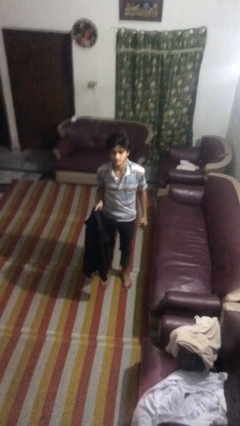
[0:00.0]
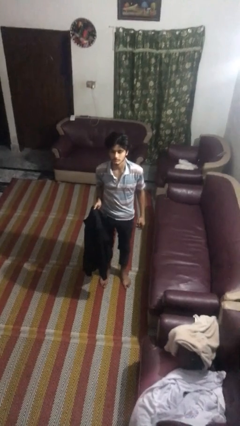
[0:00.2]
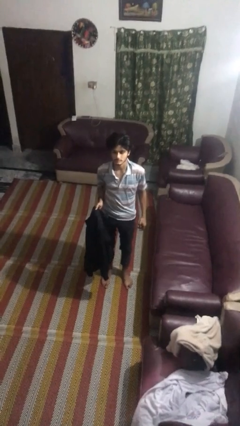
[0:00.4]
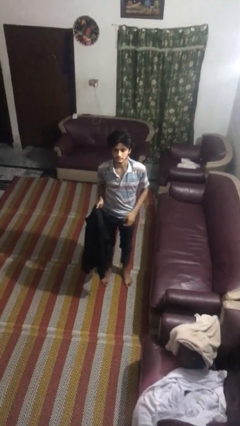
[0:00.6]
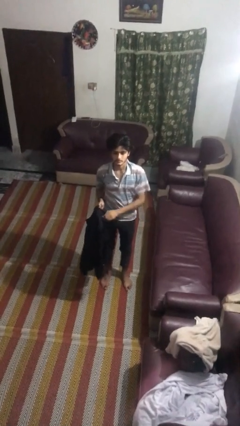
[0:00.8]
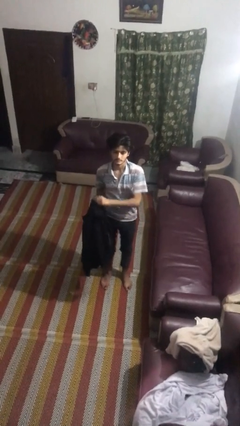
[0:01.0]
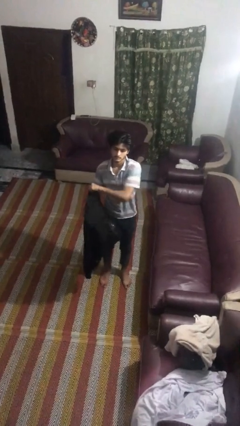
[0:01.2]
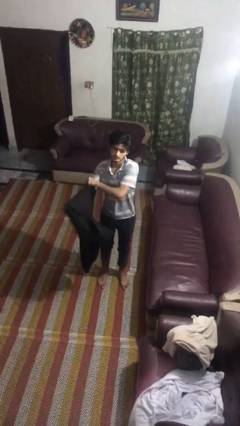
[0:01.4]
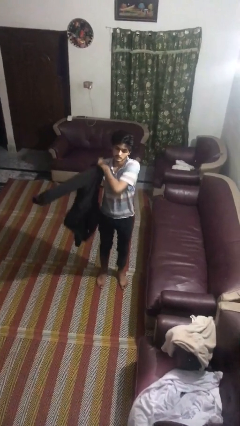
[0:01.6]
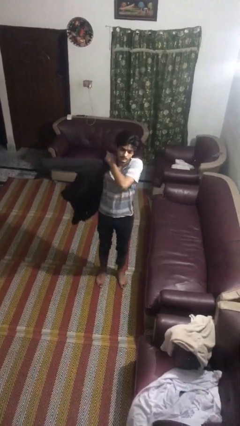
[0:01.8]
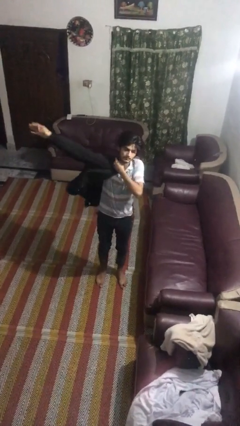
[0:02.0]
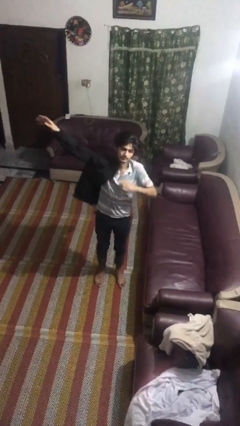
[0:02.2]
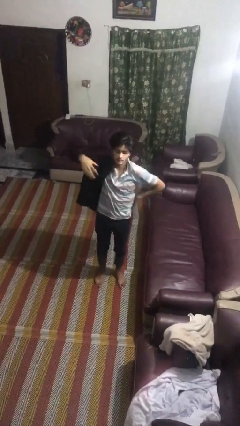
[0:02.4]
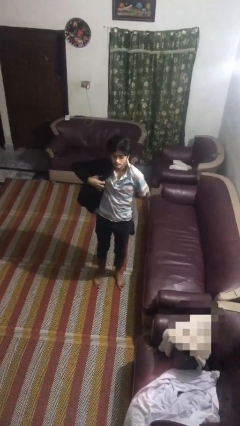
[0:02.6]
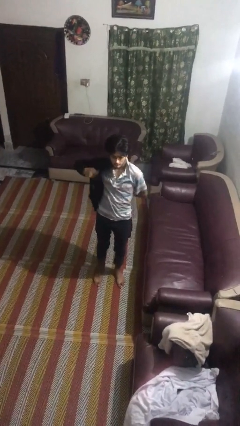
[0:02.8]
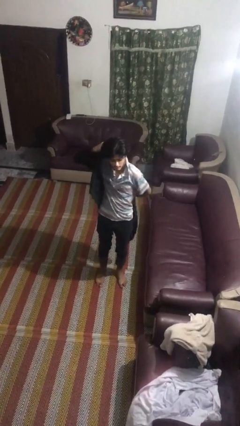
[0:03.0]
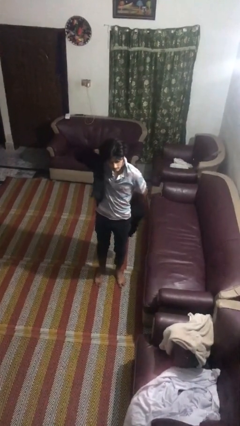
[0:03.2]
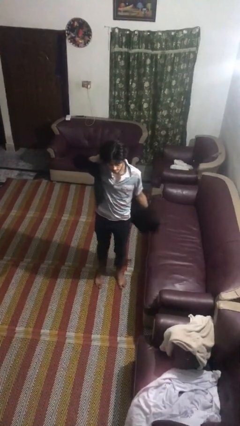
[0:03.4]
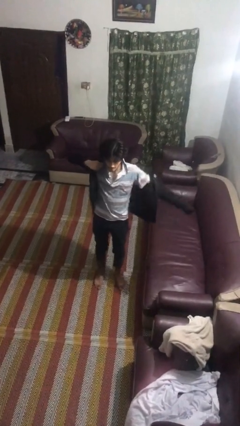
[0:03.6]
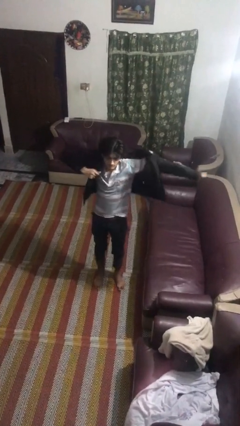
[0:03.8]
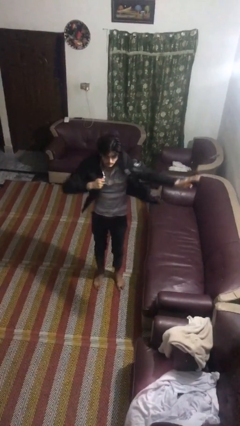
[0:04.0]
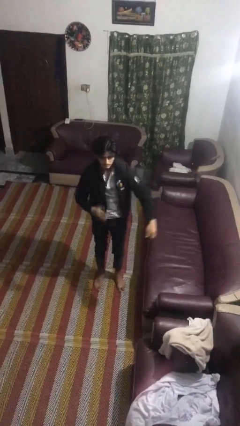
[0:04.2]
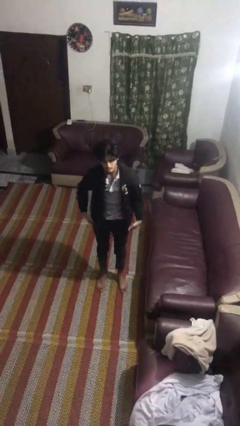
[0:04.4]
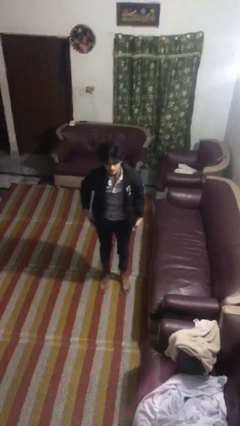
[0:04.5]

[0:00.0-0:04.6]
person puts on jacket

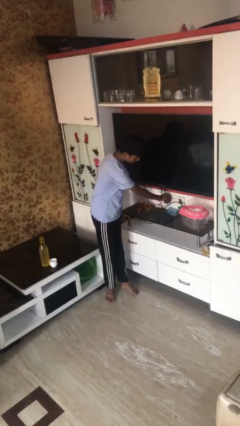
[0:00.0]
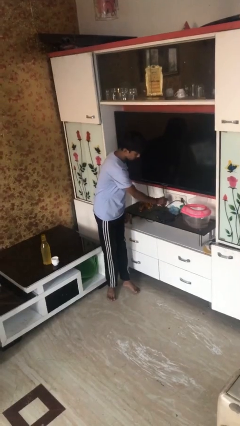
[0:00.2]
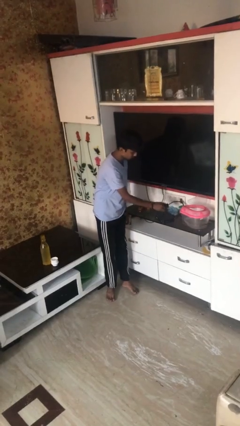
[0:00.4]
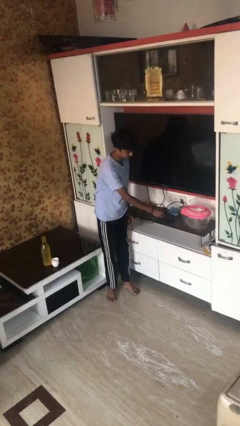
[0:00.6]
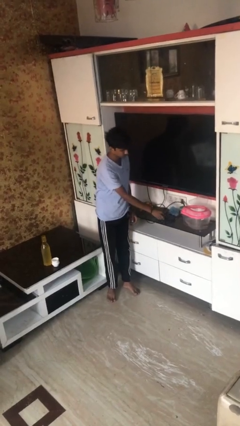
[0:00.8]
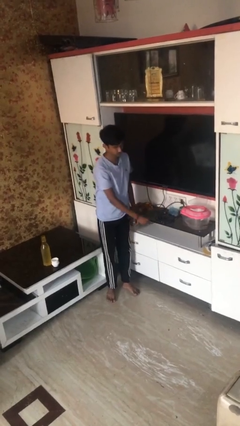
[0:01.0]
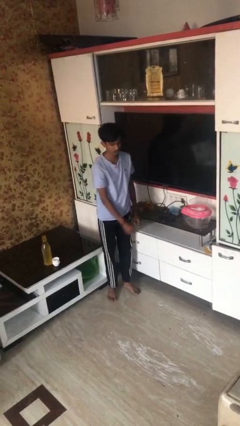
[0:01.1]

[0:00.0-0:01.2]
person unplugs from electrical socket

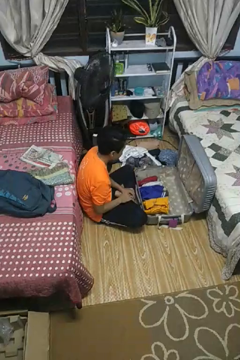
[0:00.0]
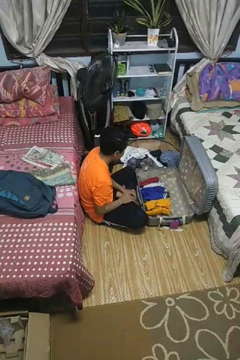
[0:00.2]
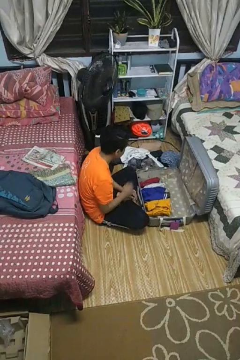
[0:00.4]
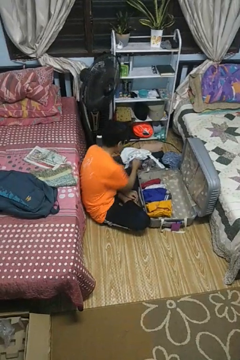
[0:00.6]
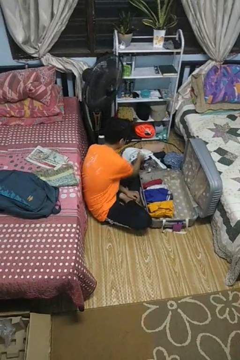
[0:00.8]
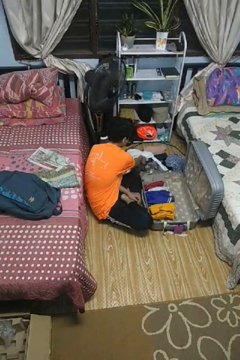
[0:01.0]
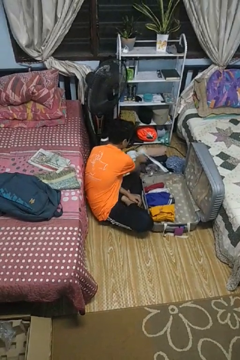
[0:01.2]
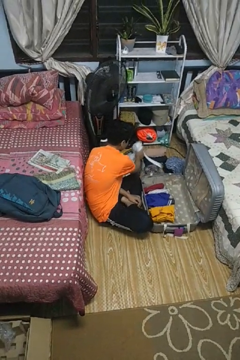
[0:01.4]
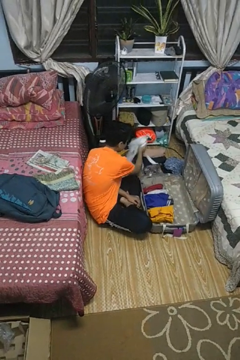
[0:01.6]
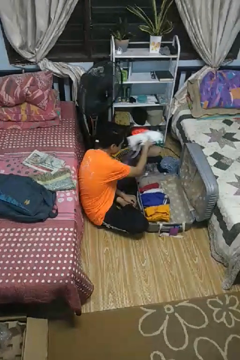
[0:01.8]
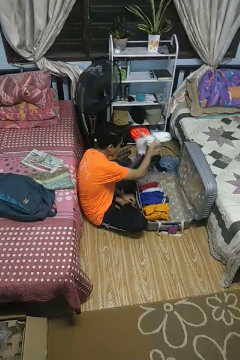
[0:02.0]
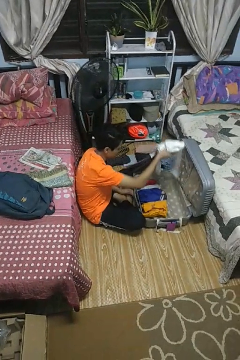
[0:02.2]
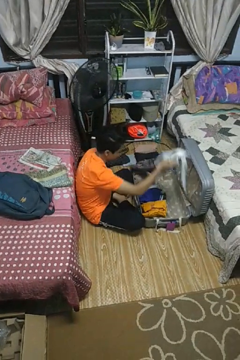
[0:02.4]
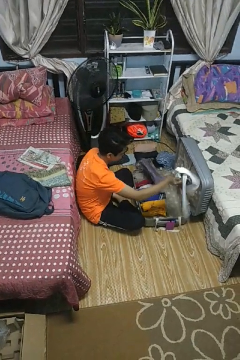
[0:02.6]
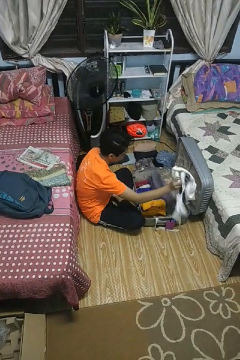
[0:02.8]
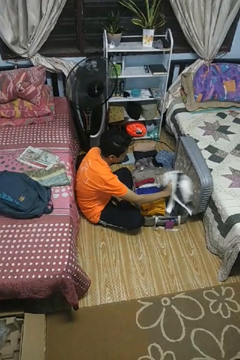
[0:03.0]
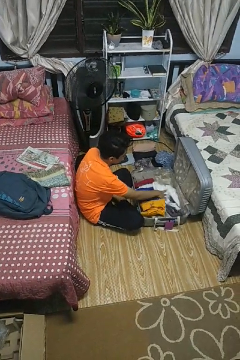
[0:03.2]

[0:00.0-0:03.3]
person loads clothes into suitcase

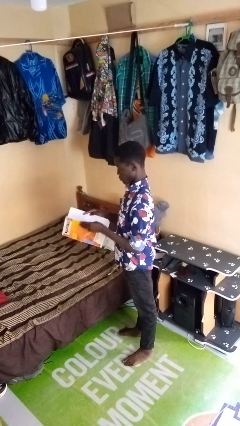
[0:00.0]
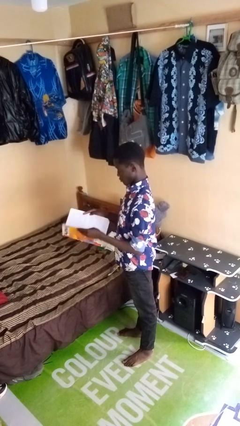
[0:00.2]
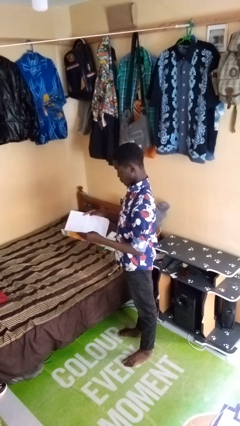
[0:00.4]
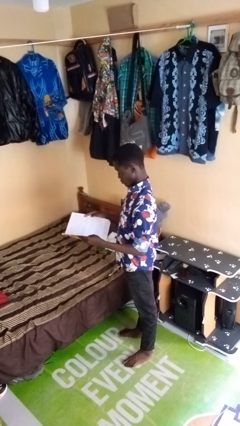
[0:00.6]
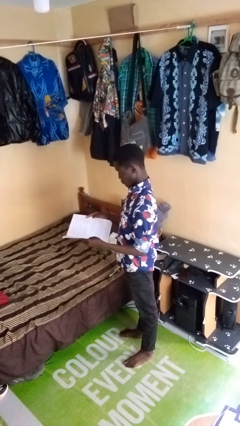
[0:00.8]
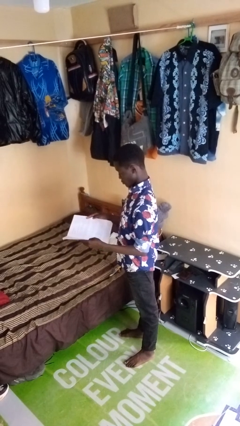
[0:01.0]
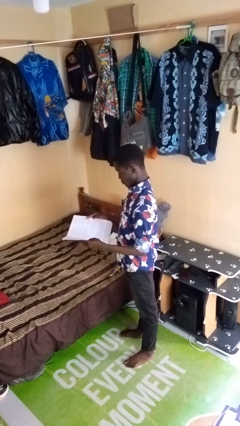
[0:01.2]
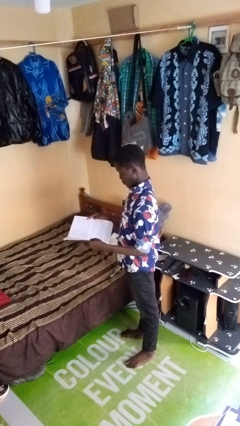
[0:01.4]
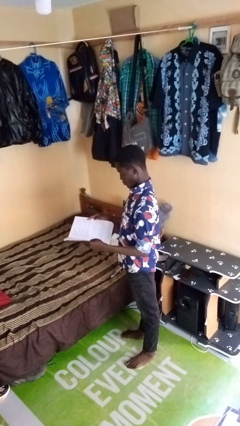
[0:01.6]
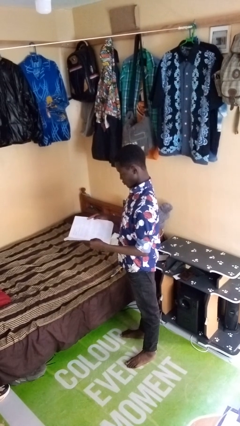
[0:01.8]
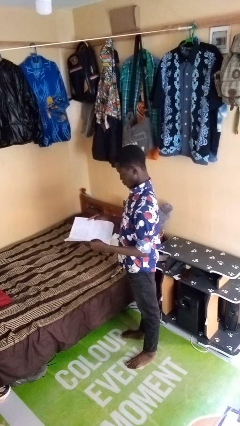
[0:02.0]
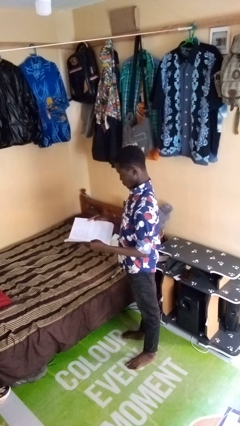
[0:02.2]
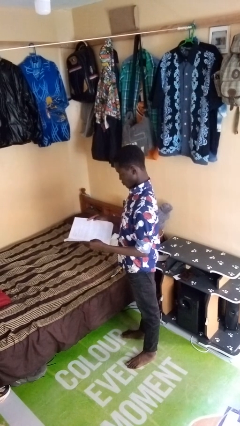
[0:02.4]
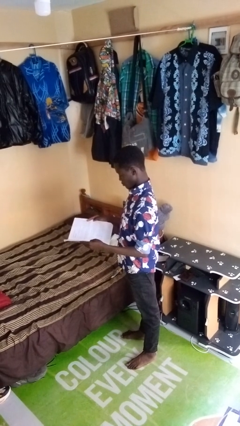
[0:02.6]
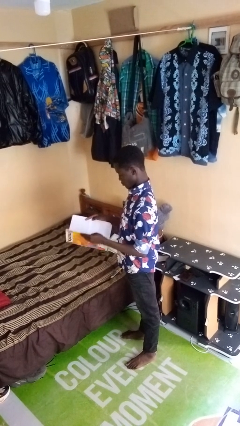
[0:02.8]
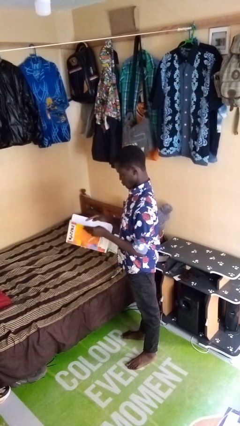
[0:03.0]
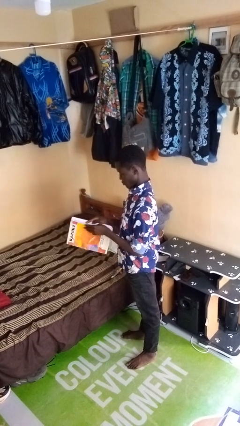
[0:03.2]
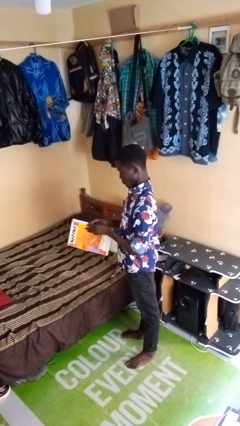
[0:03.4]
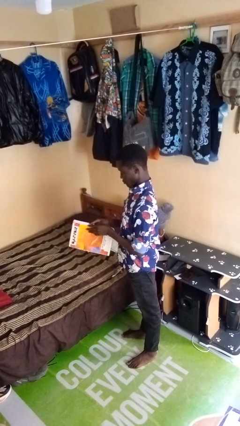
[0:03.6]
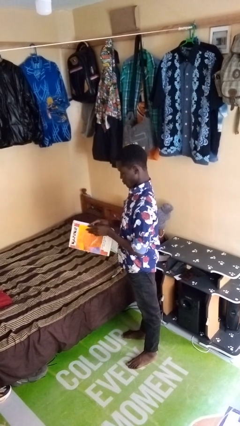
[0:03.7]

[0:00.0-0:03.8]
person reads newspaper

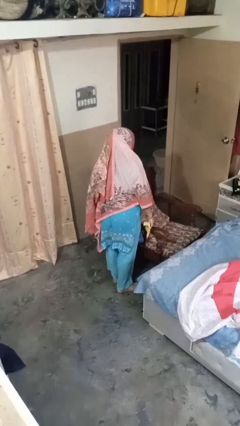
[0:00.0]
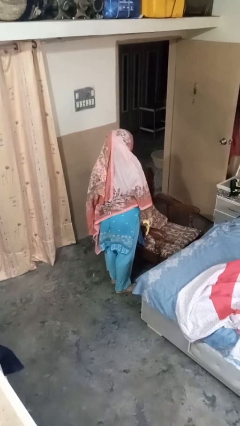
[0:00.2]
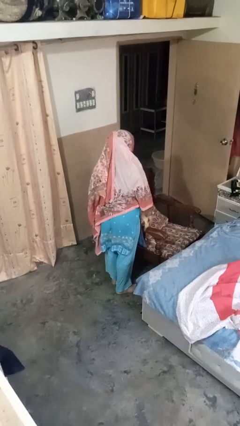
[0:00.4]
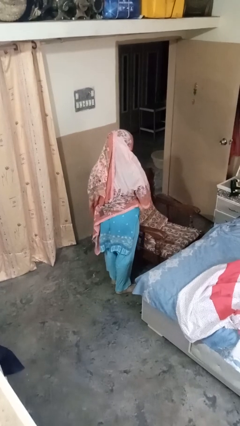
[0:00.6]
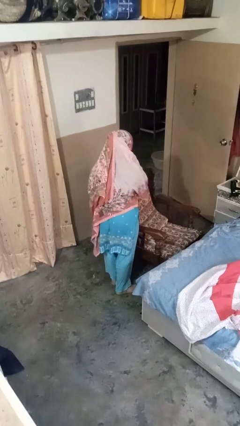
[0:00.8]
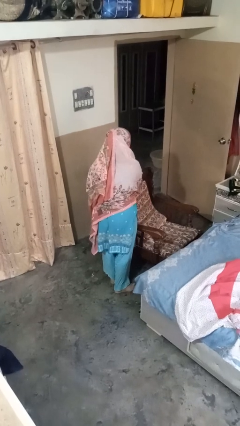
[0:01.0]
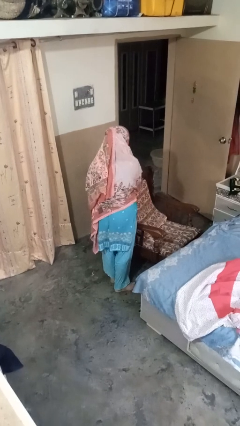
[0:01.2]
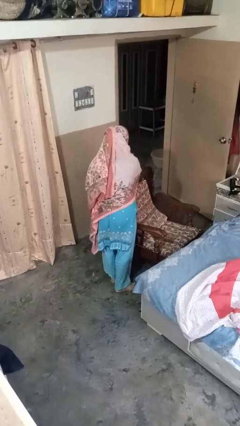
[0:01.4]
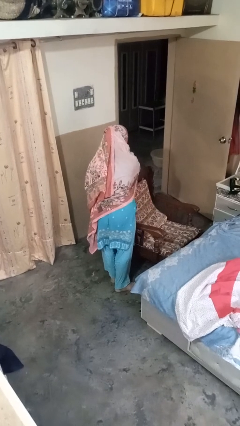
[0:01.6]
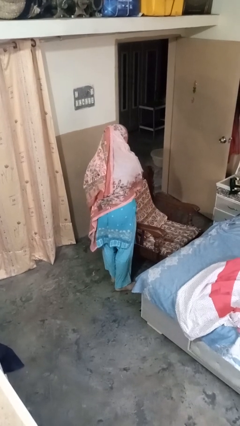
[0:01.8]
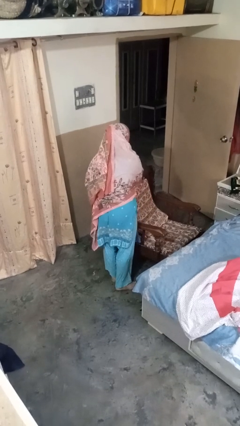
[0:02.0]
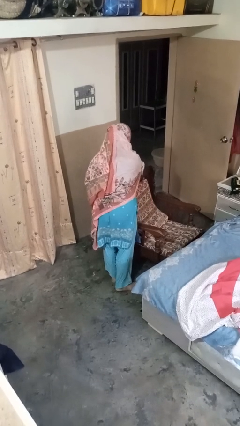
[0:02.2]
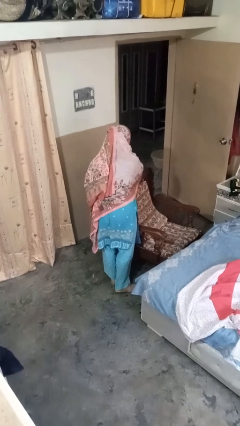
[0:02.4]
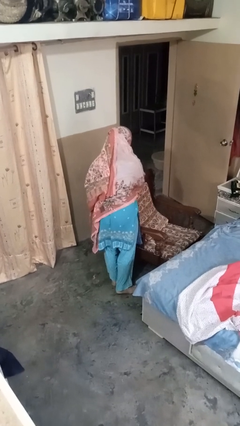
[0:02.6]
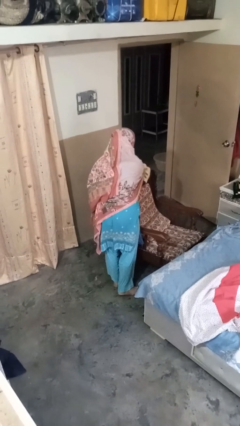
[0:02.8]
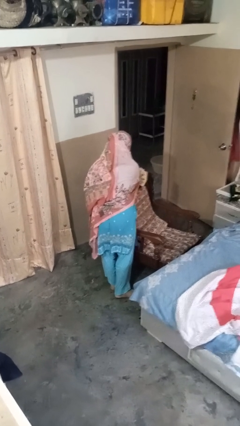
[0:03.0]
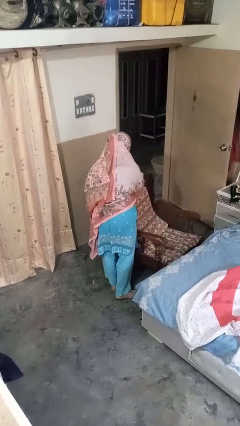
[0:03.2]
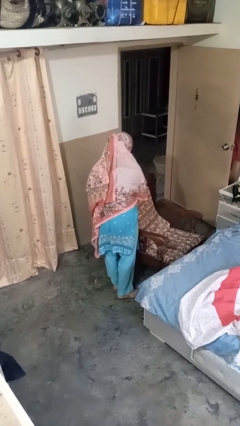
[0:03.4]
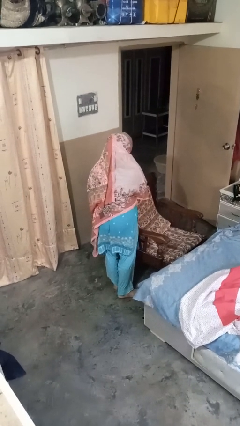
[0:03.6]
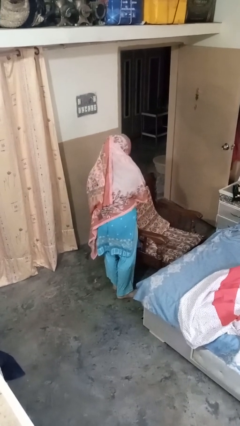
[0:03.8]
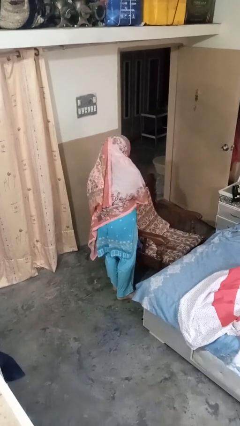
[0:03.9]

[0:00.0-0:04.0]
person dusts furniture

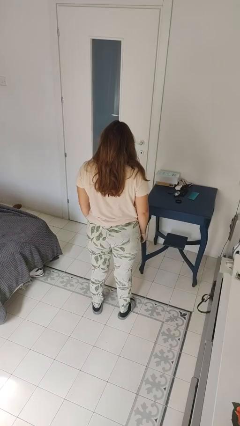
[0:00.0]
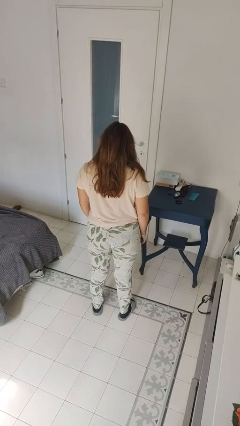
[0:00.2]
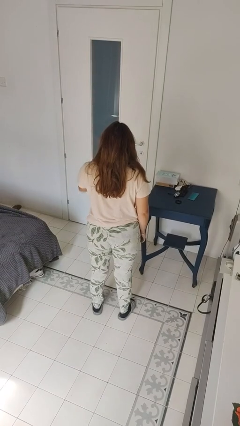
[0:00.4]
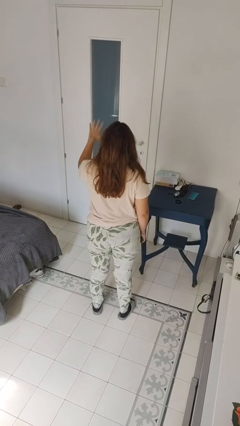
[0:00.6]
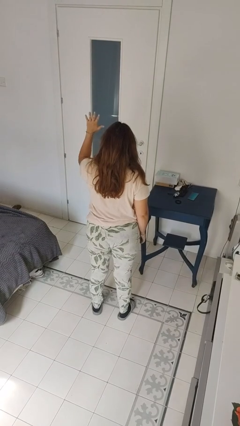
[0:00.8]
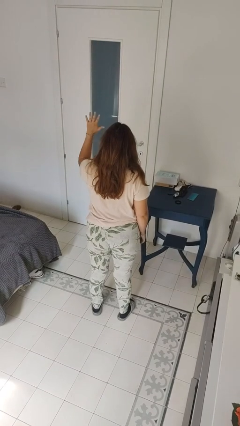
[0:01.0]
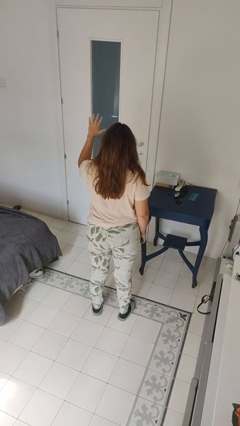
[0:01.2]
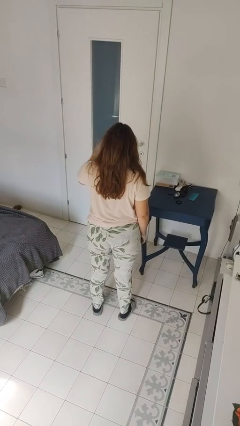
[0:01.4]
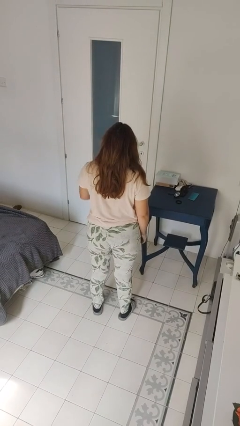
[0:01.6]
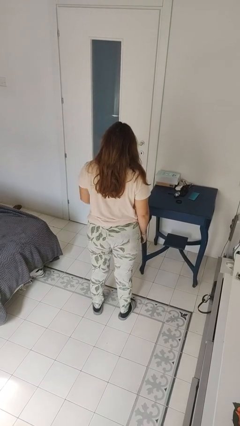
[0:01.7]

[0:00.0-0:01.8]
person gestures number five
